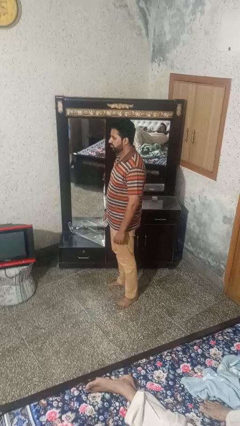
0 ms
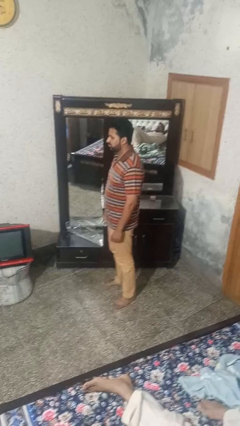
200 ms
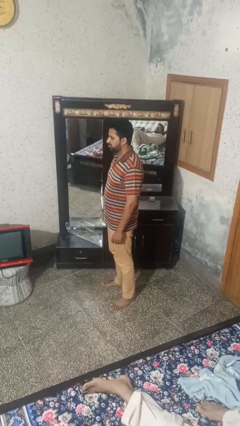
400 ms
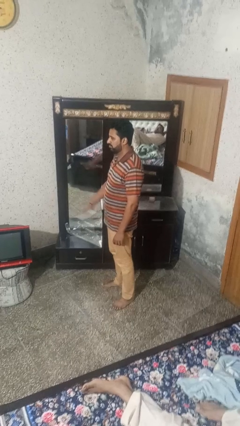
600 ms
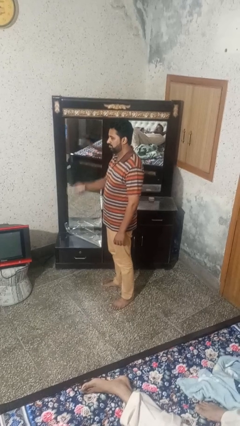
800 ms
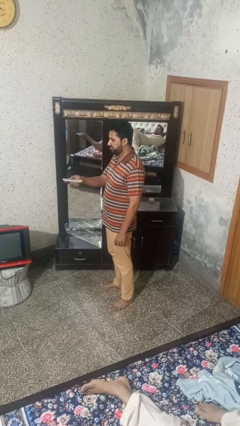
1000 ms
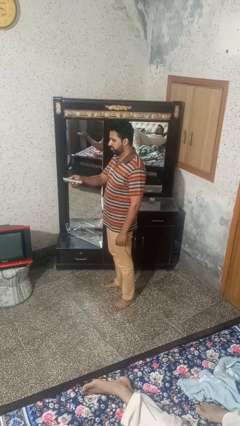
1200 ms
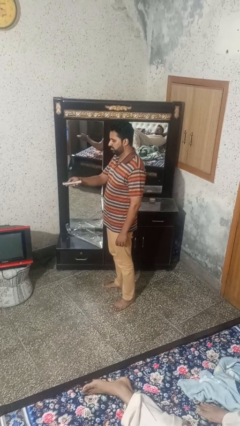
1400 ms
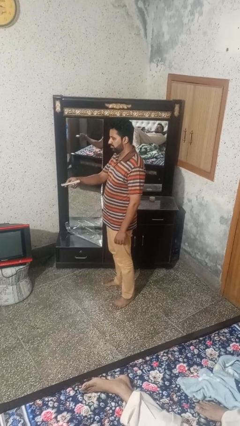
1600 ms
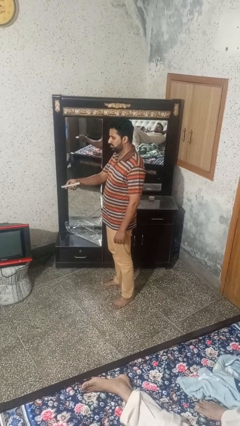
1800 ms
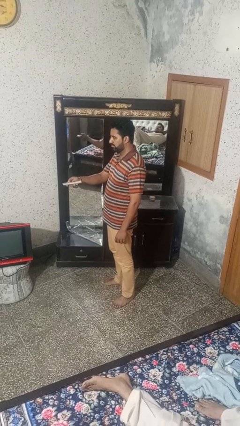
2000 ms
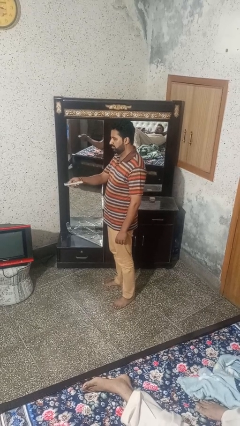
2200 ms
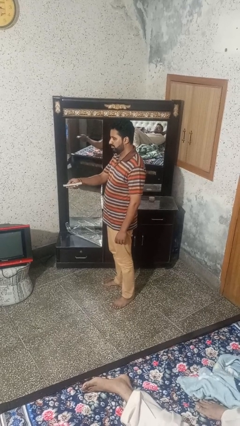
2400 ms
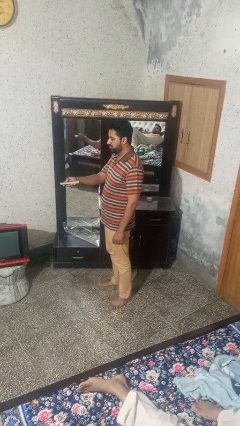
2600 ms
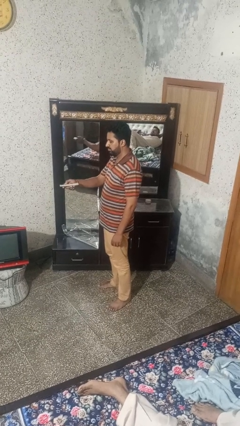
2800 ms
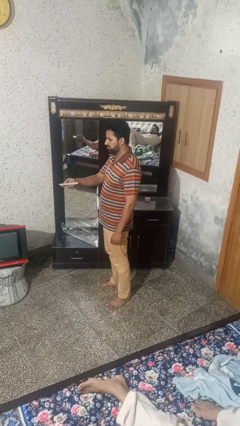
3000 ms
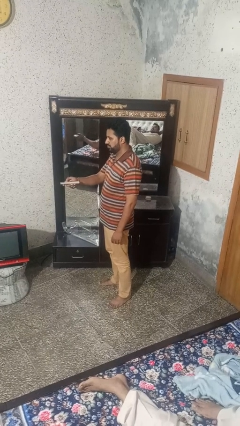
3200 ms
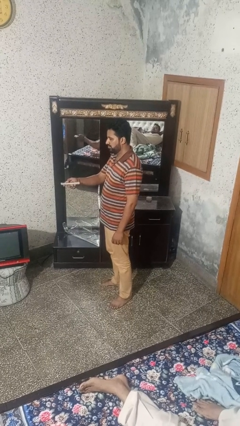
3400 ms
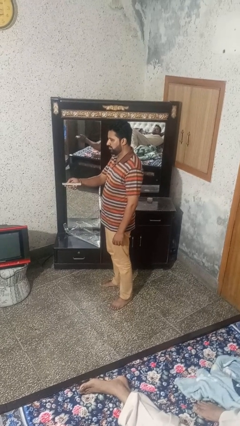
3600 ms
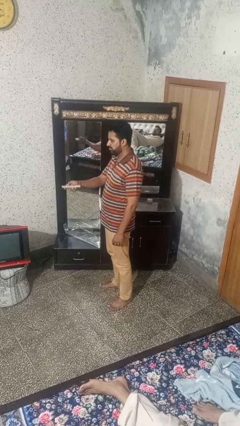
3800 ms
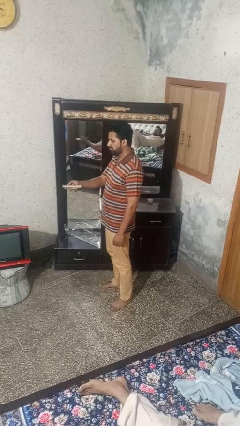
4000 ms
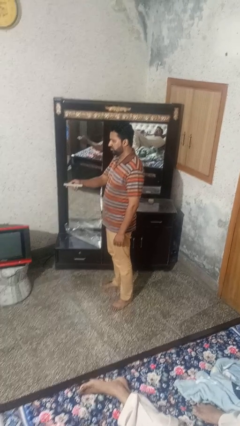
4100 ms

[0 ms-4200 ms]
person uses television remote

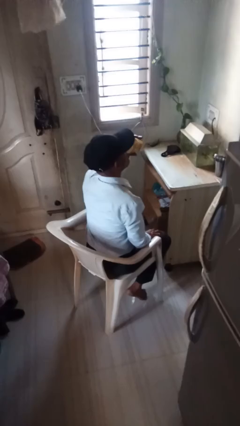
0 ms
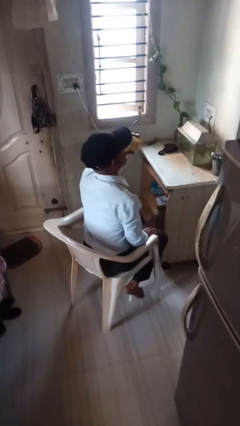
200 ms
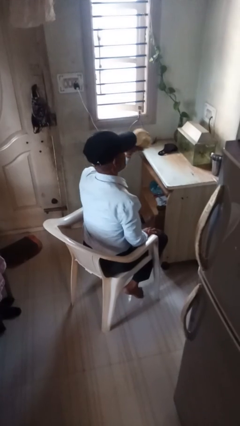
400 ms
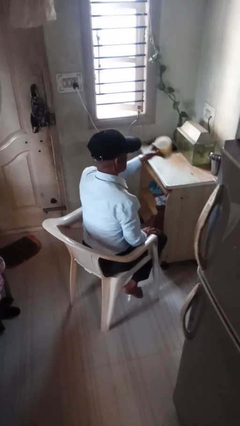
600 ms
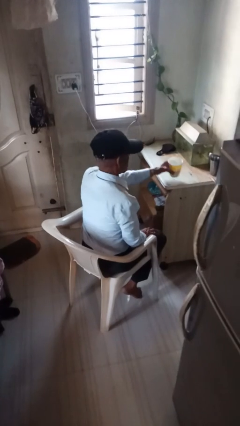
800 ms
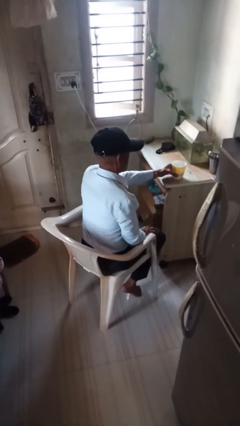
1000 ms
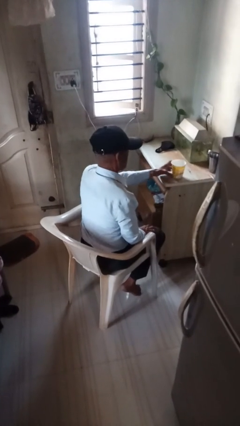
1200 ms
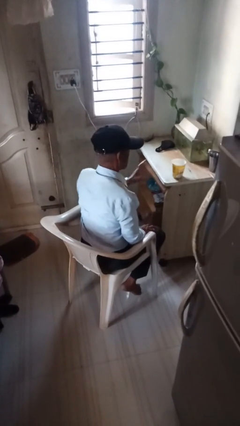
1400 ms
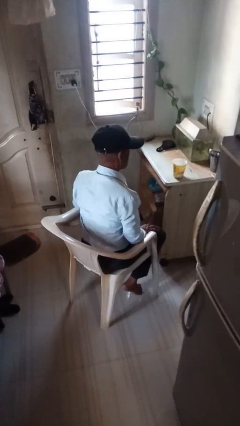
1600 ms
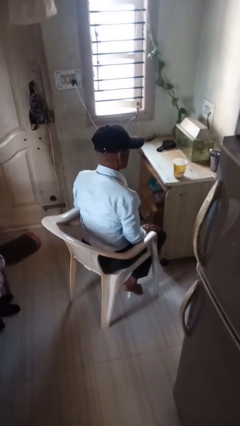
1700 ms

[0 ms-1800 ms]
person puts down object on table

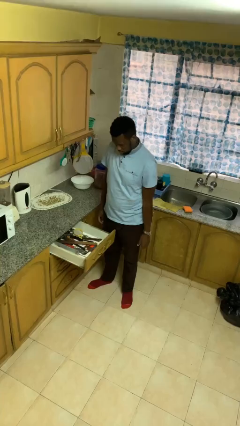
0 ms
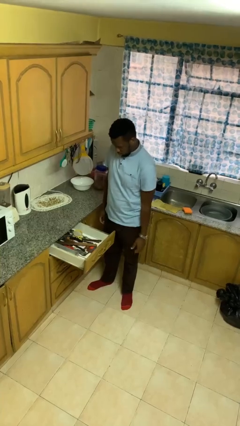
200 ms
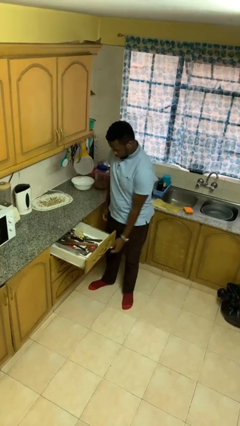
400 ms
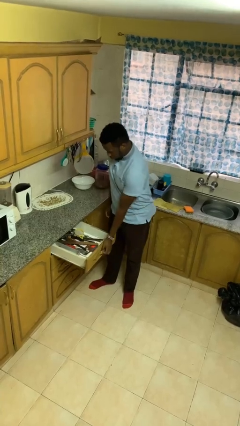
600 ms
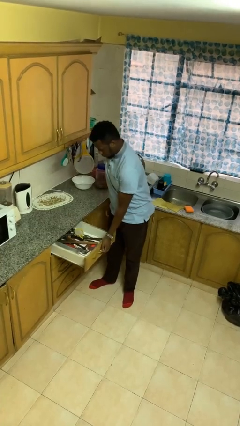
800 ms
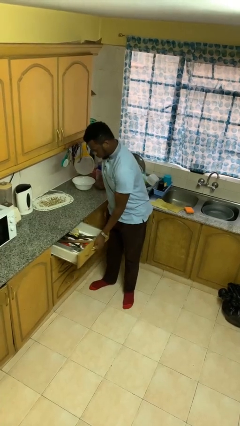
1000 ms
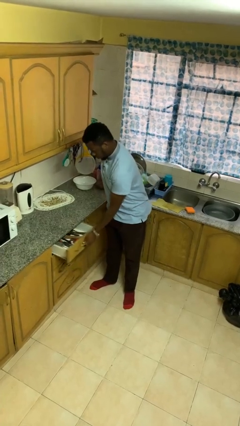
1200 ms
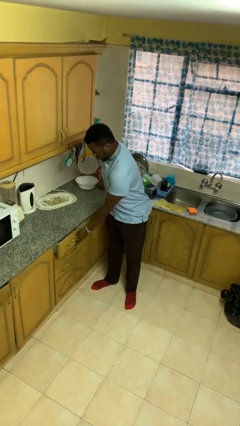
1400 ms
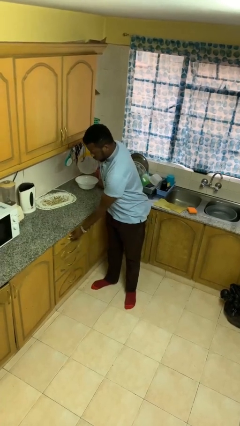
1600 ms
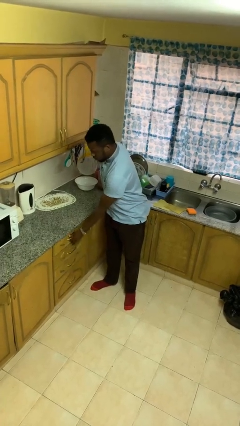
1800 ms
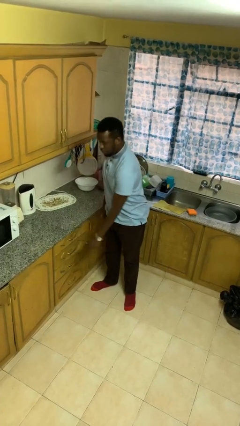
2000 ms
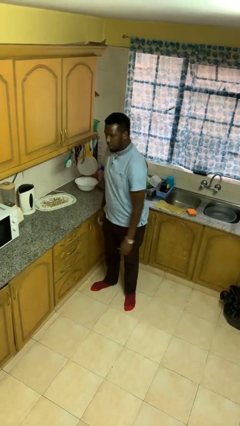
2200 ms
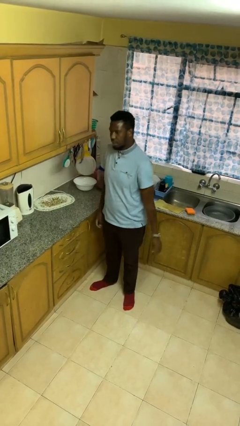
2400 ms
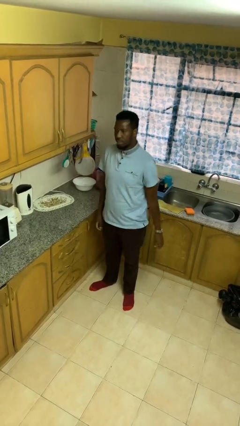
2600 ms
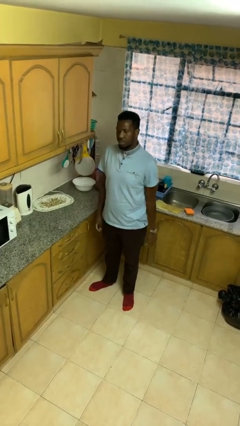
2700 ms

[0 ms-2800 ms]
person closes kitchen drawer

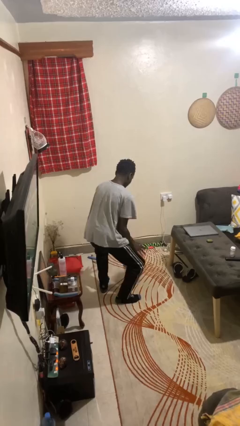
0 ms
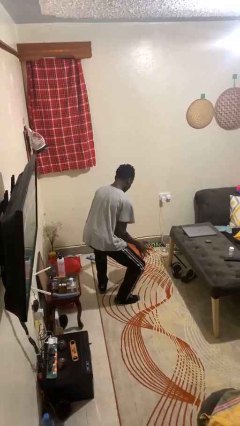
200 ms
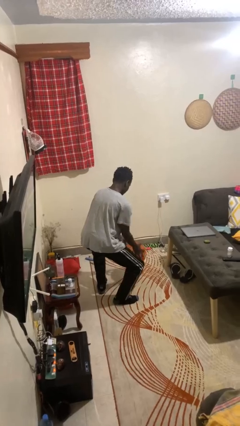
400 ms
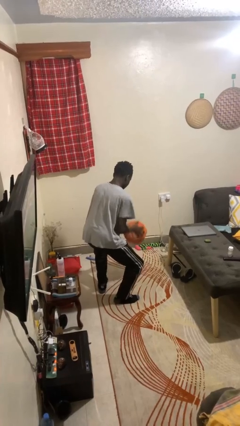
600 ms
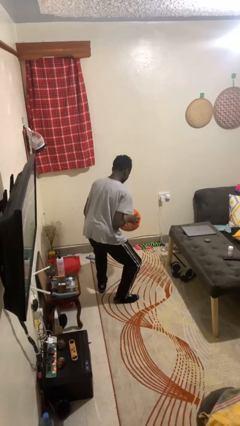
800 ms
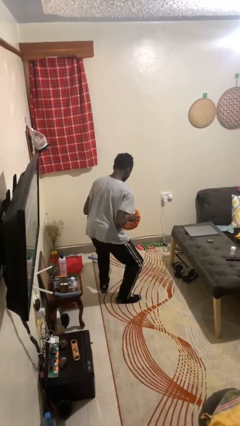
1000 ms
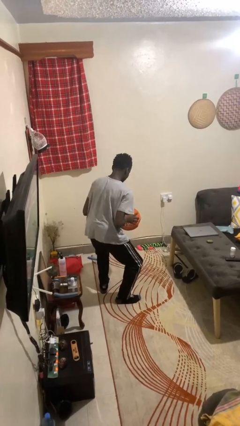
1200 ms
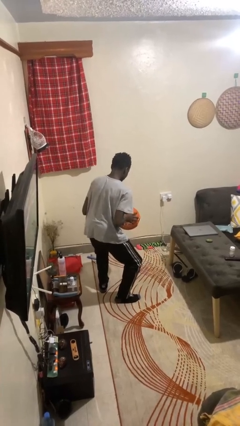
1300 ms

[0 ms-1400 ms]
person bounces ball on floor

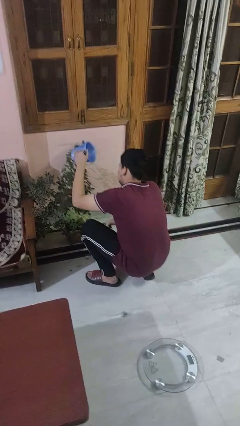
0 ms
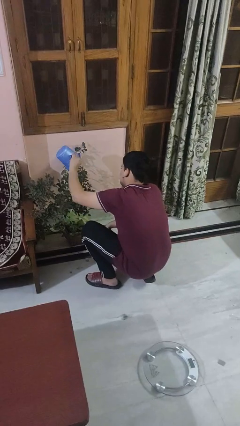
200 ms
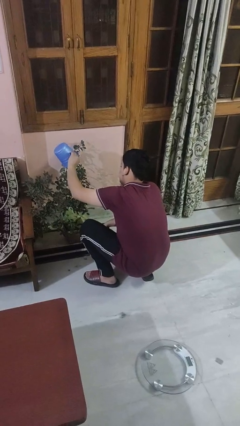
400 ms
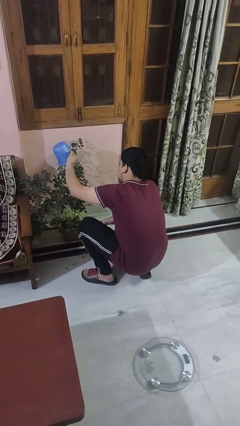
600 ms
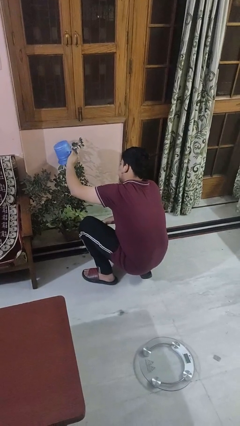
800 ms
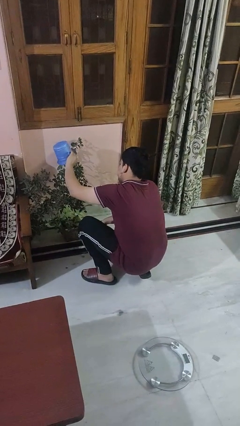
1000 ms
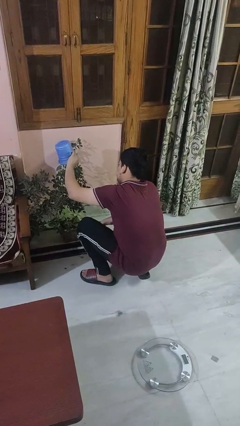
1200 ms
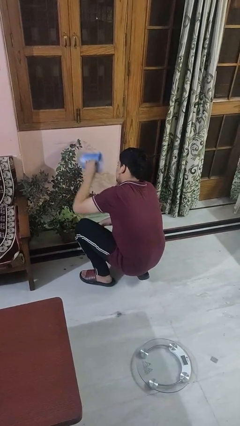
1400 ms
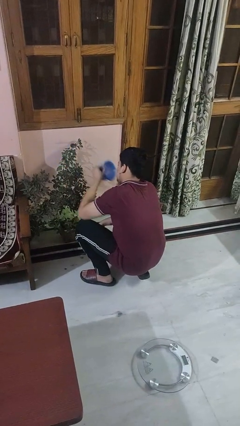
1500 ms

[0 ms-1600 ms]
person waters houseplant

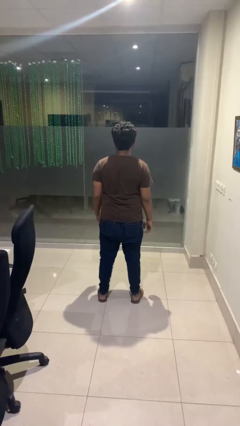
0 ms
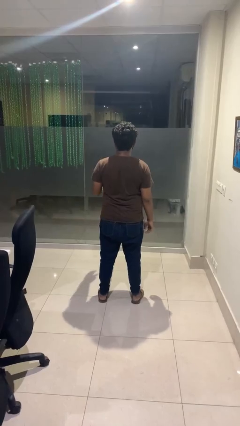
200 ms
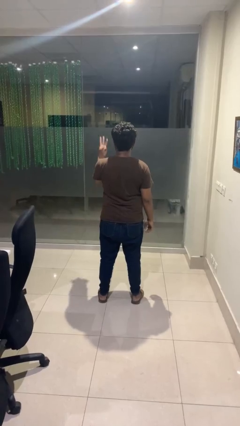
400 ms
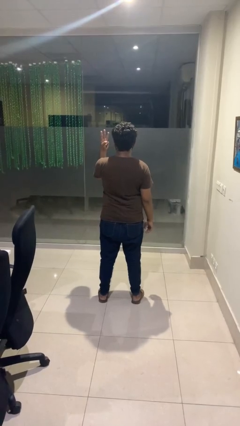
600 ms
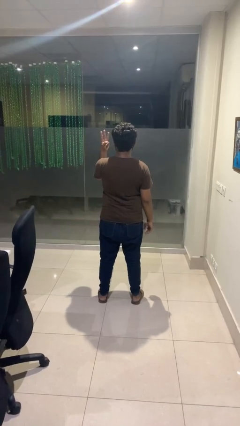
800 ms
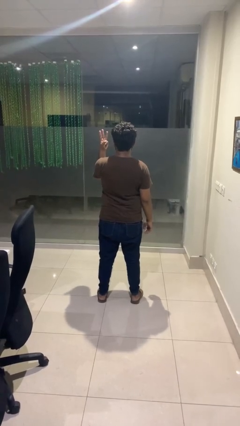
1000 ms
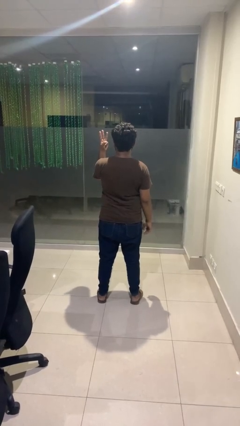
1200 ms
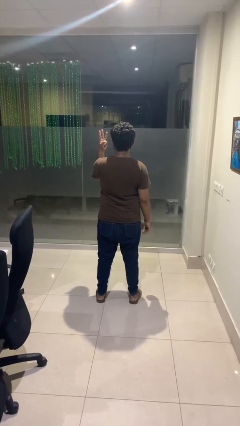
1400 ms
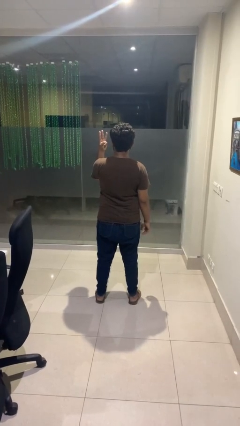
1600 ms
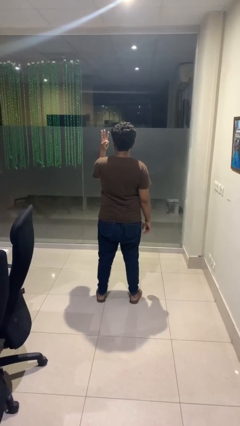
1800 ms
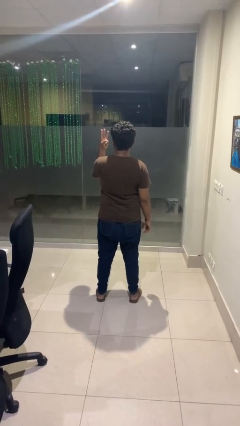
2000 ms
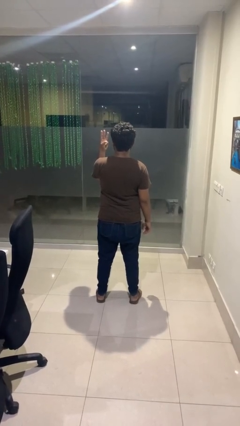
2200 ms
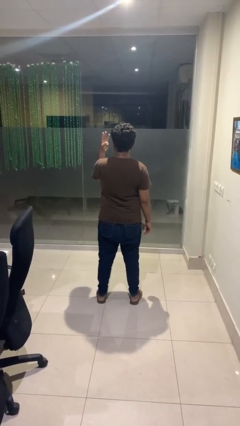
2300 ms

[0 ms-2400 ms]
person gestures number three

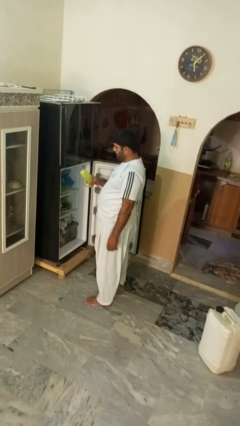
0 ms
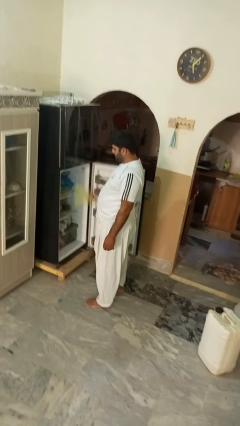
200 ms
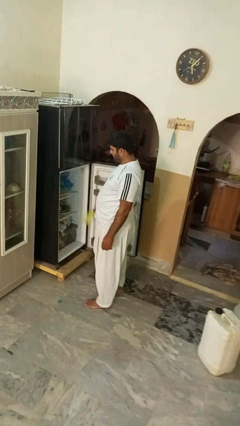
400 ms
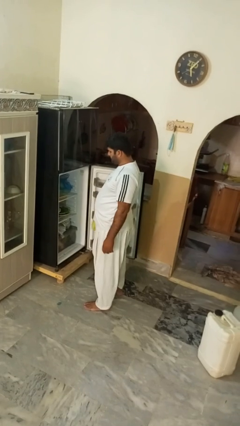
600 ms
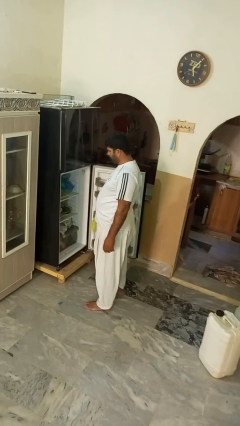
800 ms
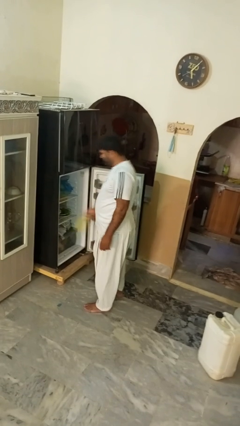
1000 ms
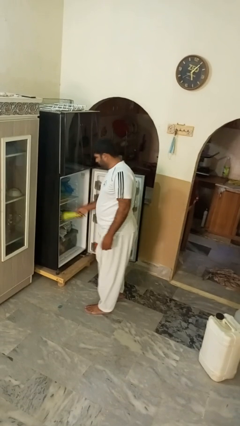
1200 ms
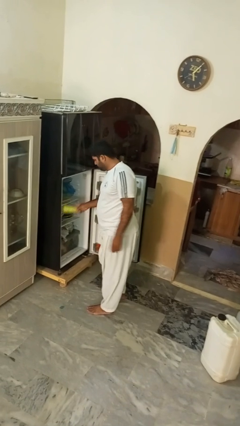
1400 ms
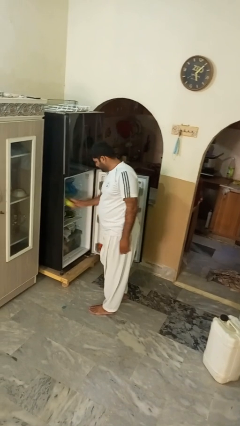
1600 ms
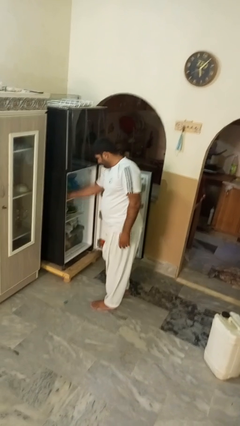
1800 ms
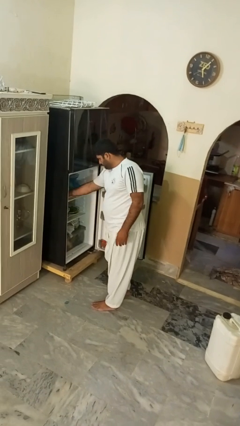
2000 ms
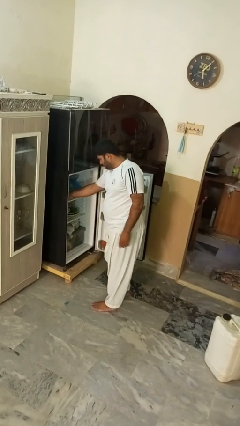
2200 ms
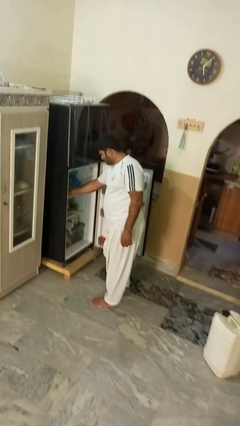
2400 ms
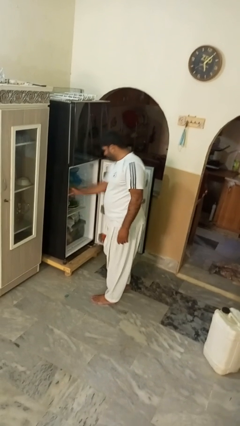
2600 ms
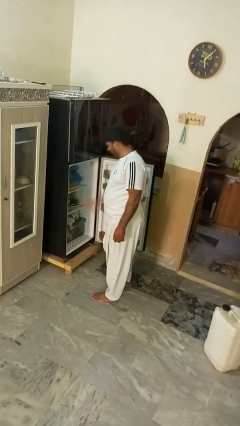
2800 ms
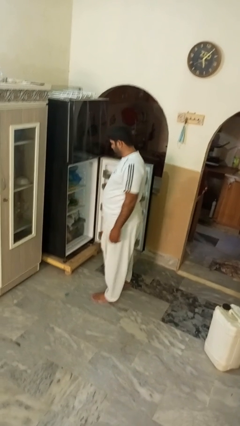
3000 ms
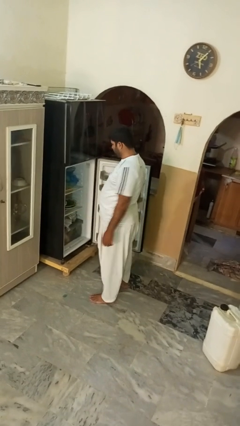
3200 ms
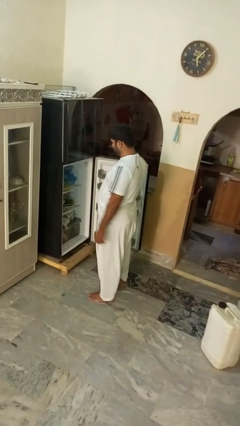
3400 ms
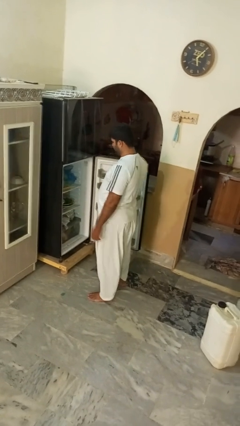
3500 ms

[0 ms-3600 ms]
person puts object into refrigerator
